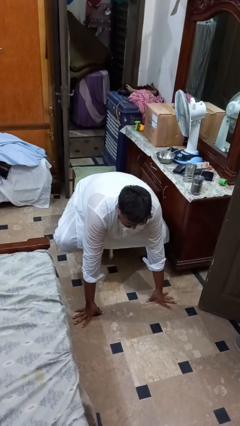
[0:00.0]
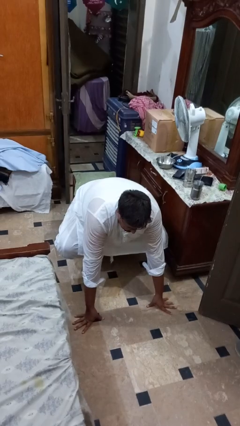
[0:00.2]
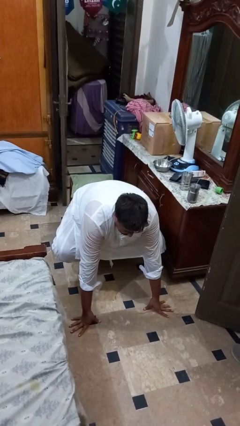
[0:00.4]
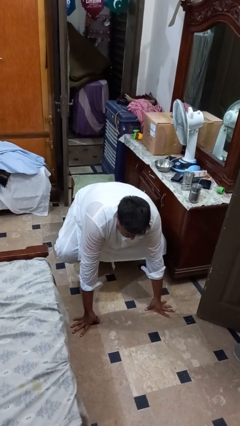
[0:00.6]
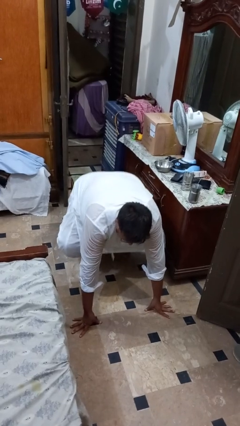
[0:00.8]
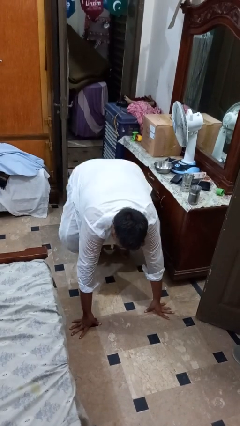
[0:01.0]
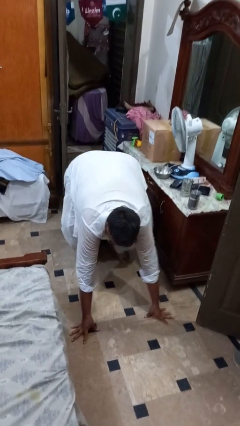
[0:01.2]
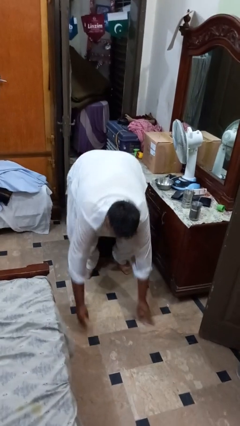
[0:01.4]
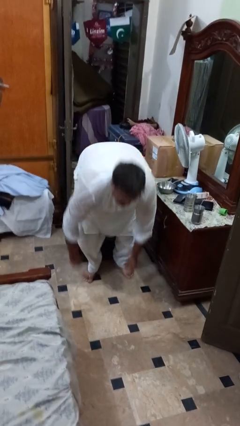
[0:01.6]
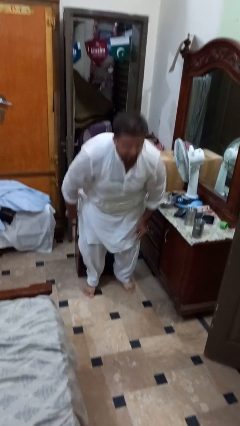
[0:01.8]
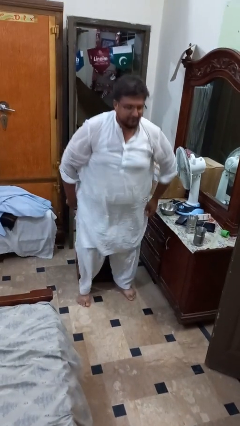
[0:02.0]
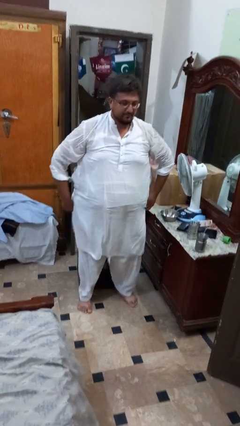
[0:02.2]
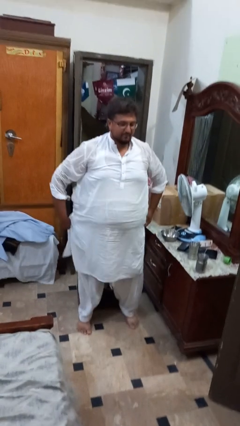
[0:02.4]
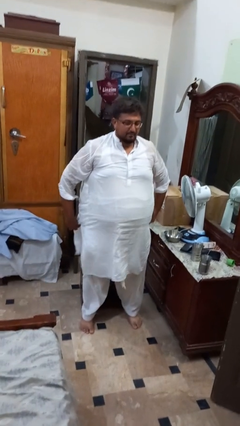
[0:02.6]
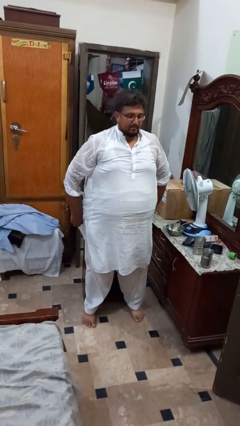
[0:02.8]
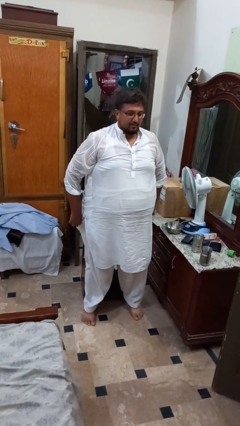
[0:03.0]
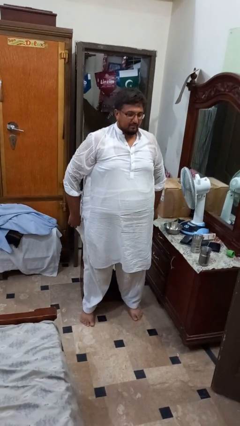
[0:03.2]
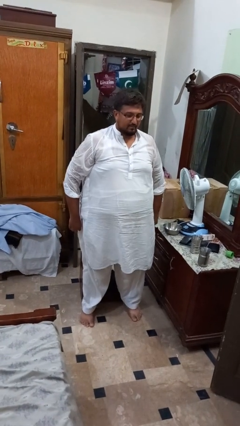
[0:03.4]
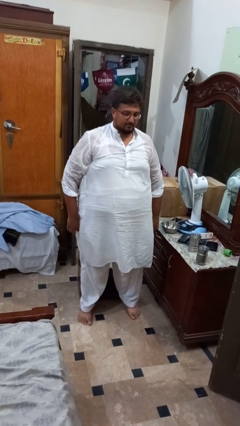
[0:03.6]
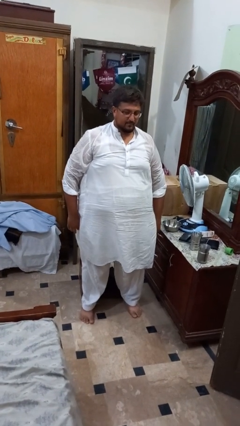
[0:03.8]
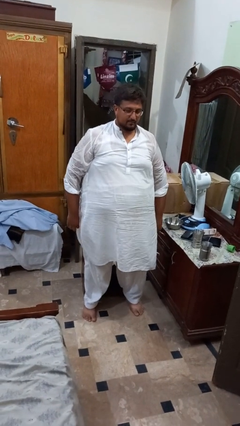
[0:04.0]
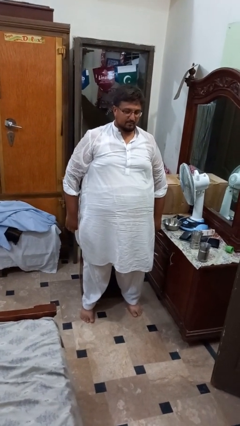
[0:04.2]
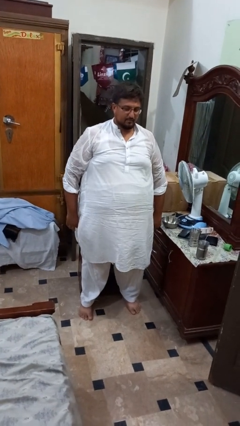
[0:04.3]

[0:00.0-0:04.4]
person stands up from floor

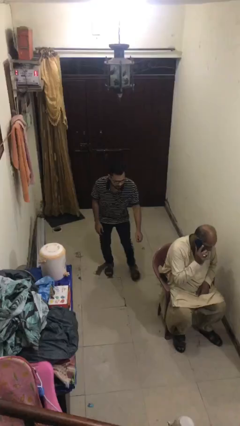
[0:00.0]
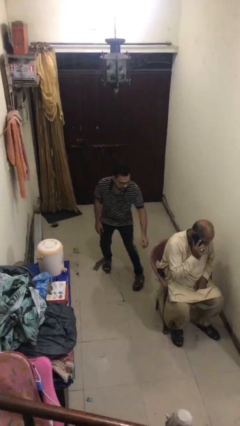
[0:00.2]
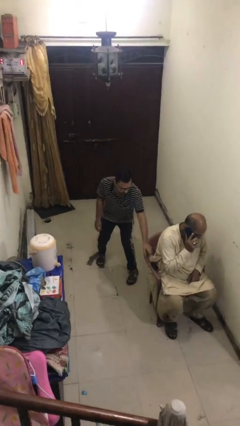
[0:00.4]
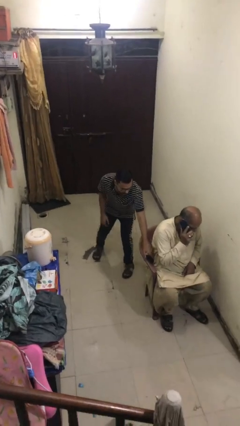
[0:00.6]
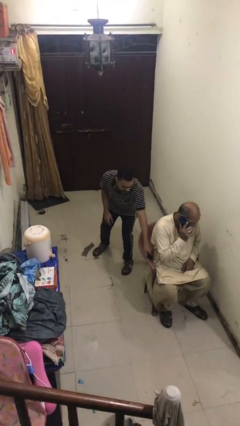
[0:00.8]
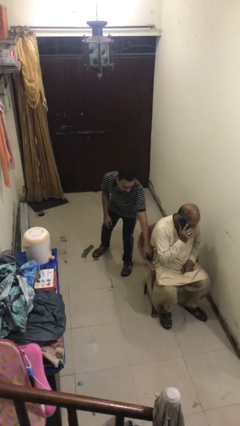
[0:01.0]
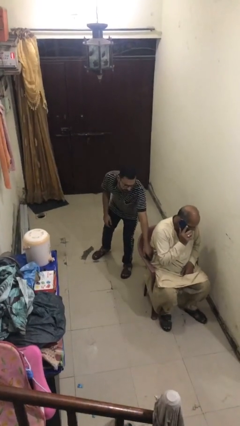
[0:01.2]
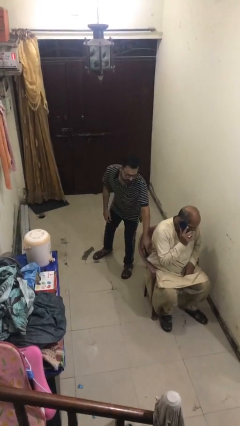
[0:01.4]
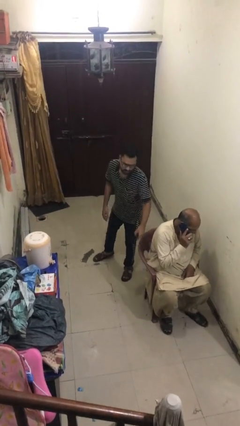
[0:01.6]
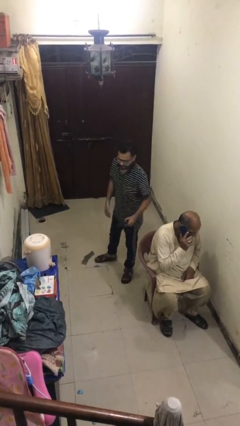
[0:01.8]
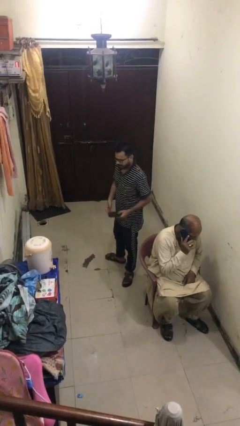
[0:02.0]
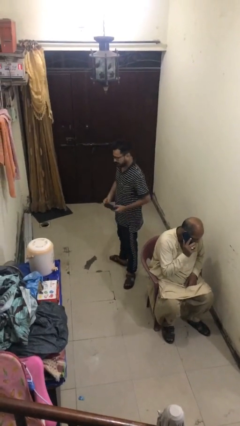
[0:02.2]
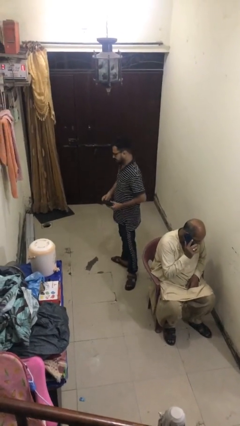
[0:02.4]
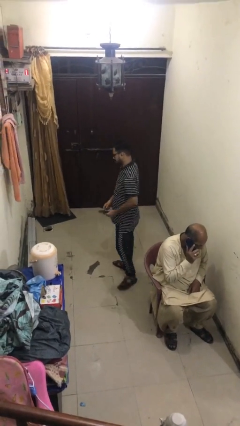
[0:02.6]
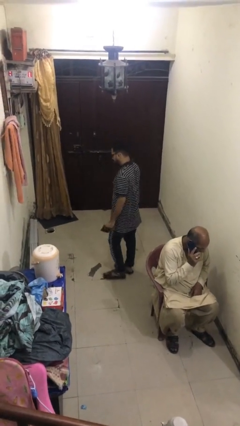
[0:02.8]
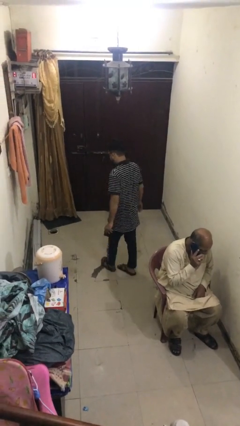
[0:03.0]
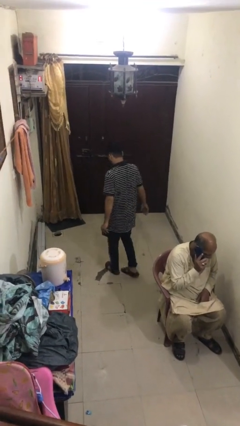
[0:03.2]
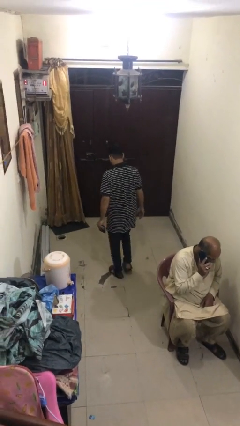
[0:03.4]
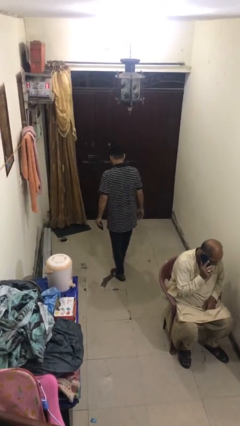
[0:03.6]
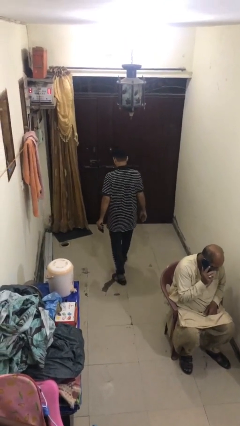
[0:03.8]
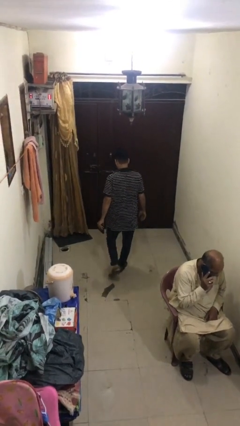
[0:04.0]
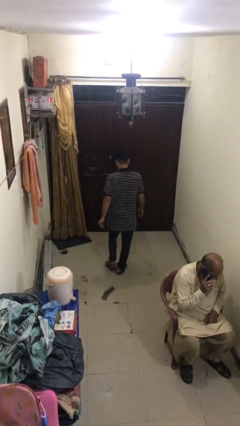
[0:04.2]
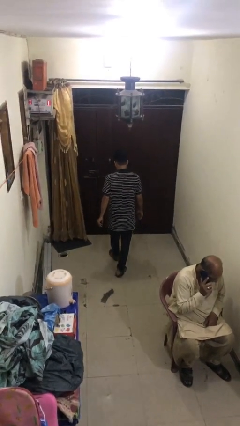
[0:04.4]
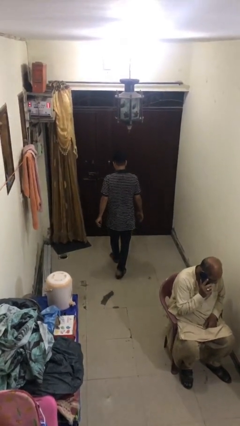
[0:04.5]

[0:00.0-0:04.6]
person steals object from person

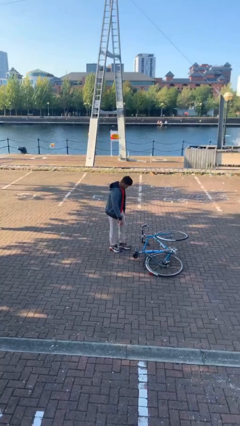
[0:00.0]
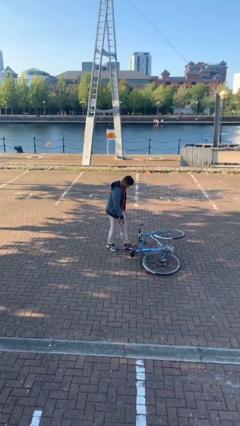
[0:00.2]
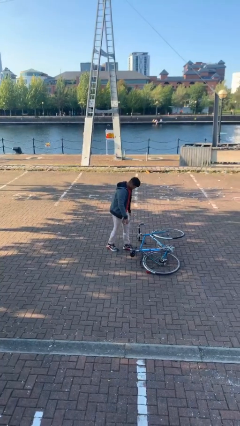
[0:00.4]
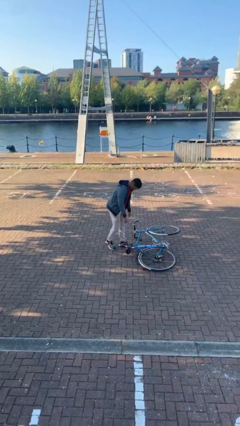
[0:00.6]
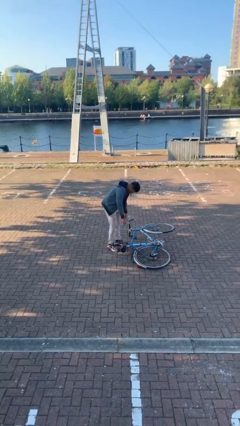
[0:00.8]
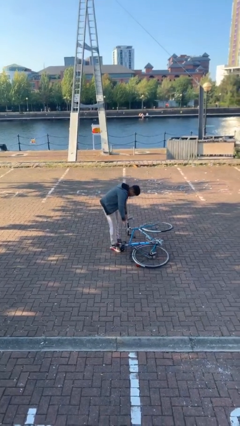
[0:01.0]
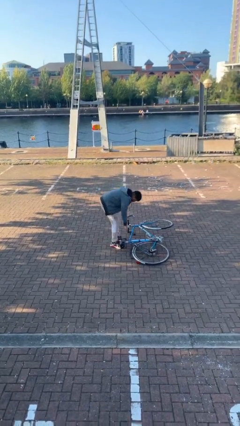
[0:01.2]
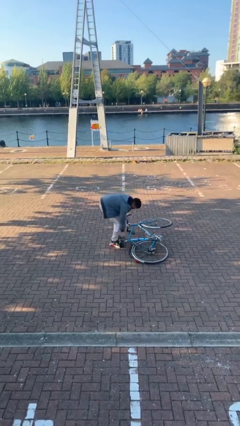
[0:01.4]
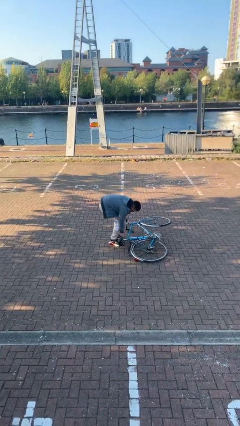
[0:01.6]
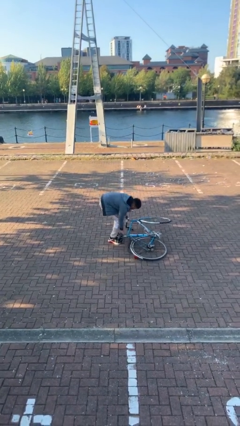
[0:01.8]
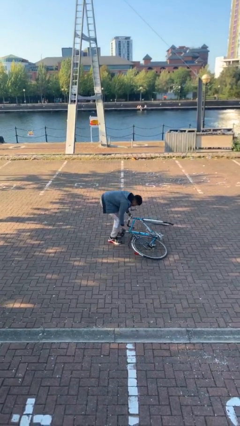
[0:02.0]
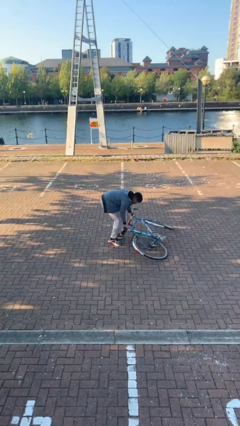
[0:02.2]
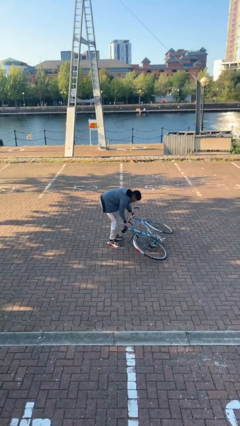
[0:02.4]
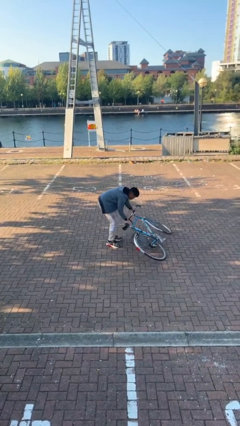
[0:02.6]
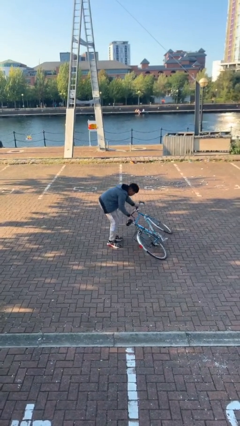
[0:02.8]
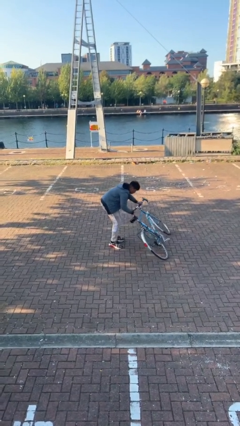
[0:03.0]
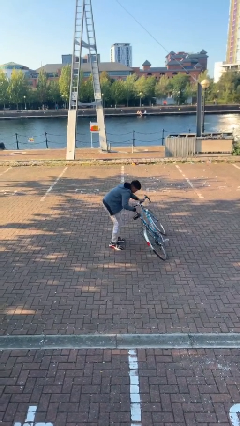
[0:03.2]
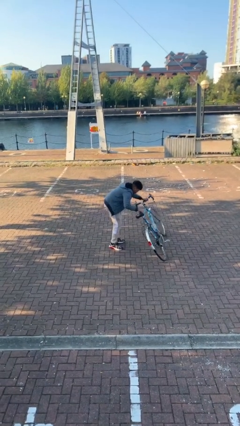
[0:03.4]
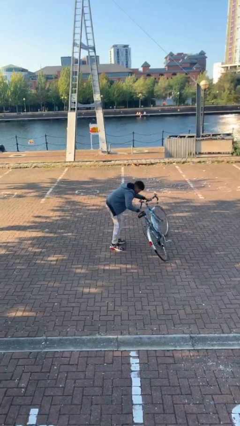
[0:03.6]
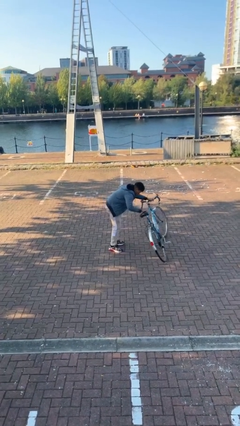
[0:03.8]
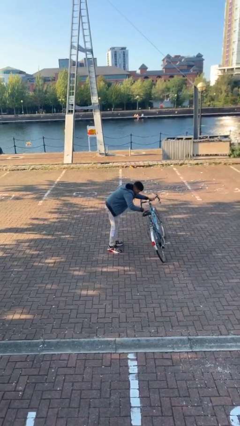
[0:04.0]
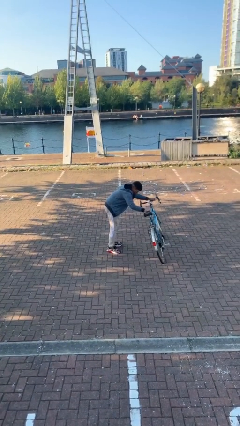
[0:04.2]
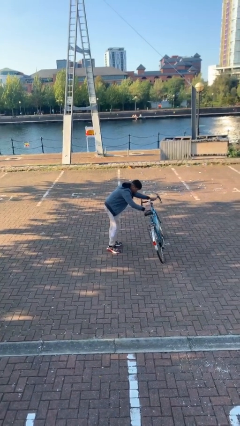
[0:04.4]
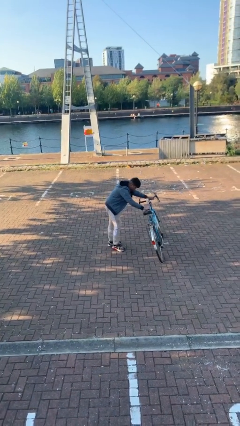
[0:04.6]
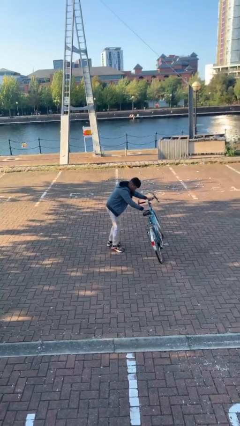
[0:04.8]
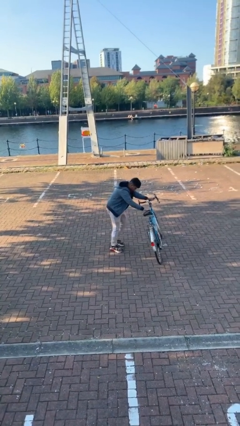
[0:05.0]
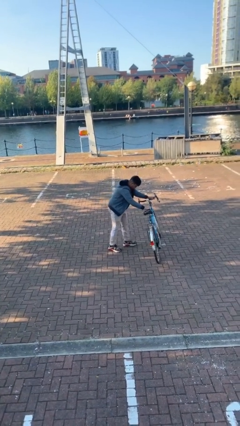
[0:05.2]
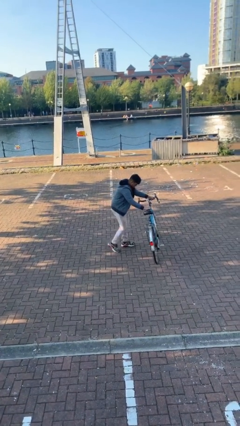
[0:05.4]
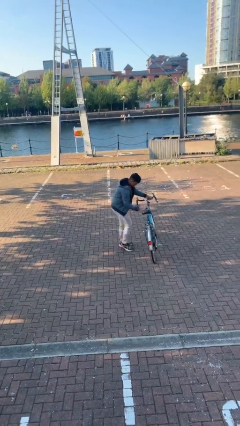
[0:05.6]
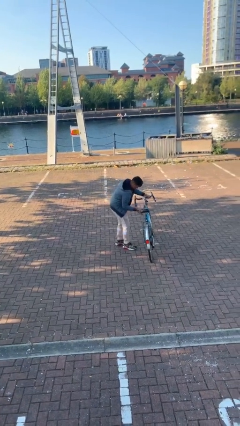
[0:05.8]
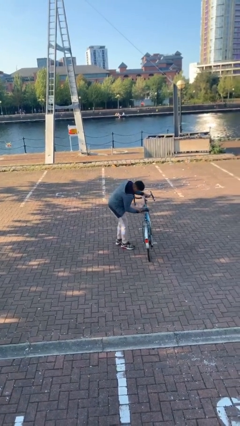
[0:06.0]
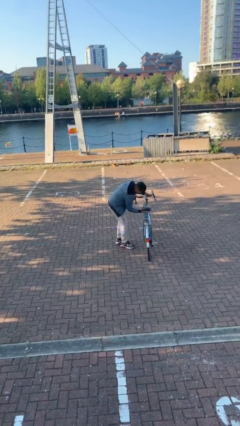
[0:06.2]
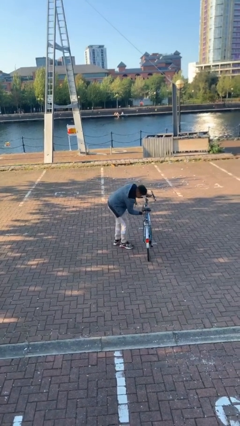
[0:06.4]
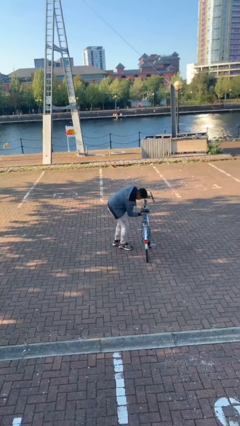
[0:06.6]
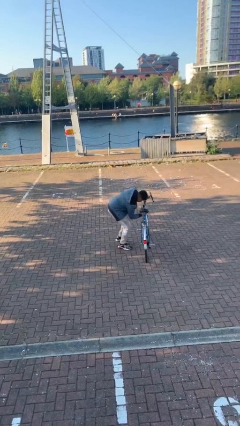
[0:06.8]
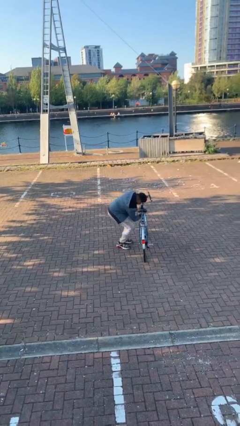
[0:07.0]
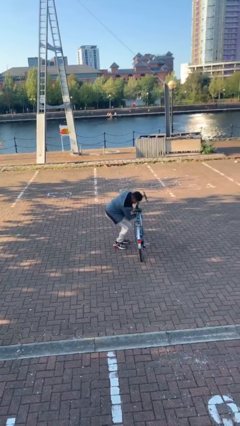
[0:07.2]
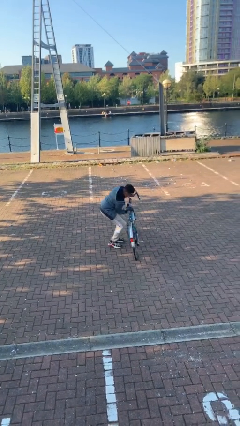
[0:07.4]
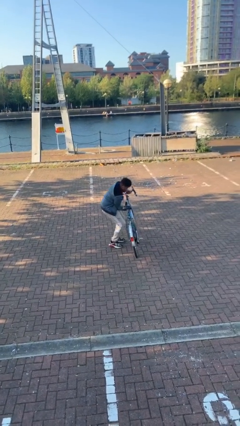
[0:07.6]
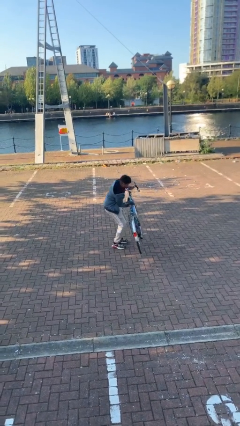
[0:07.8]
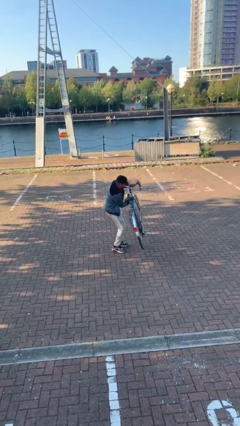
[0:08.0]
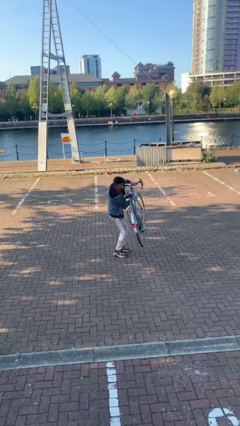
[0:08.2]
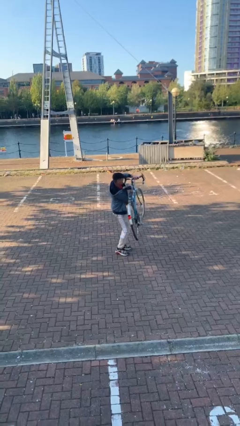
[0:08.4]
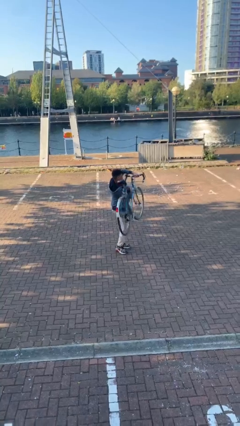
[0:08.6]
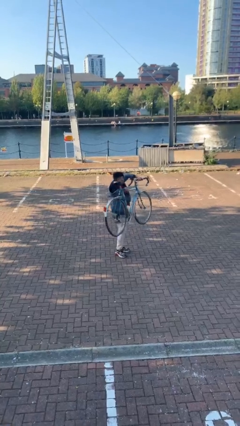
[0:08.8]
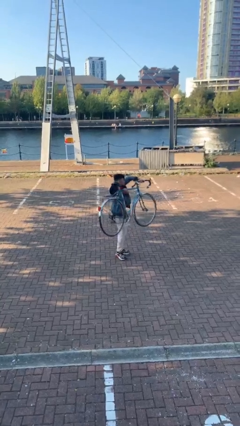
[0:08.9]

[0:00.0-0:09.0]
person picks up object from floor
